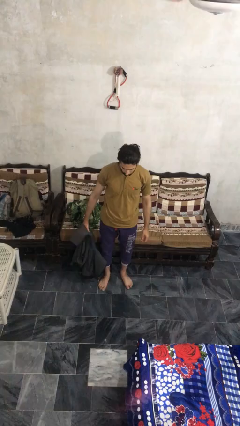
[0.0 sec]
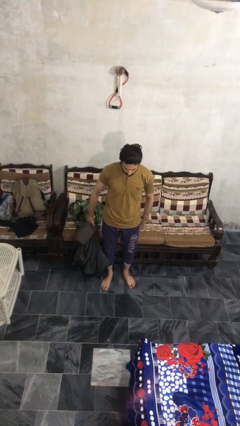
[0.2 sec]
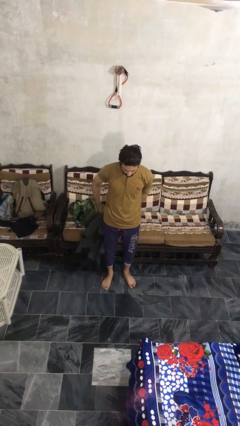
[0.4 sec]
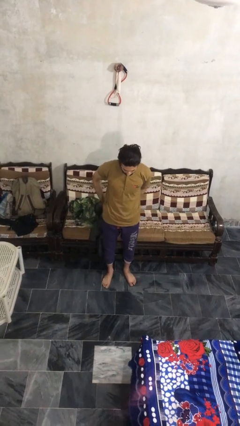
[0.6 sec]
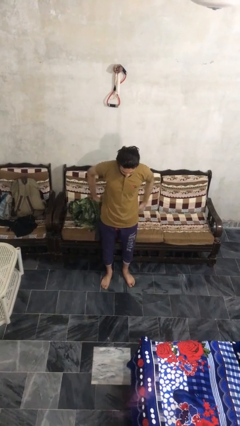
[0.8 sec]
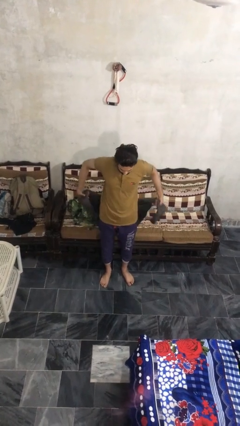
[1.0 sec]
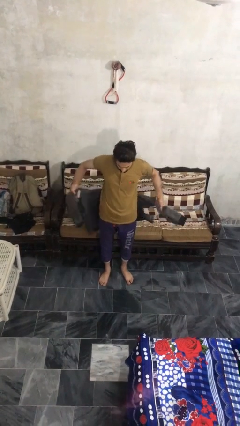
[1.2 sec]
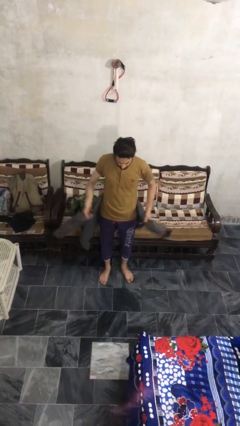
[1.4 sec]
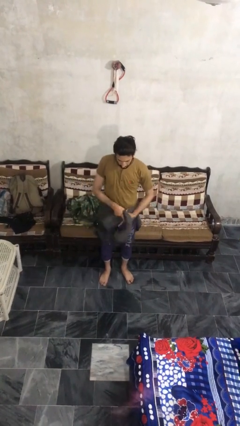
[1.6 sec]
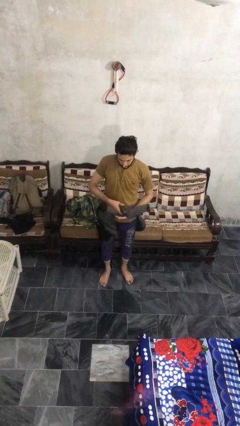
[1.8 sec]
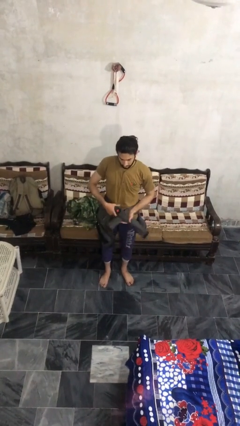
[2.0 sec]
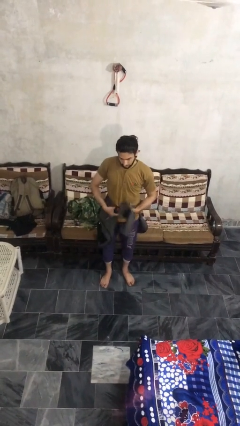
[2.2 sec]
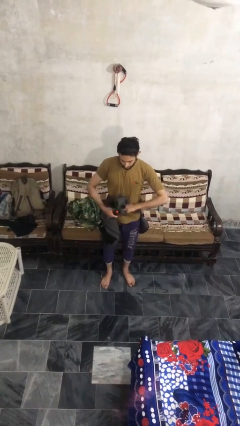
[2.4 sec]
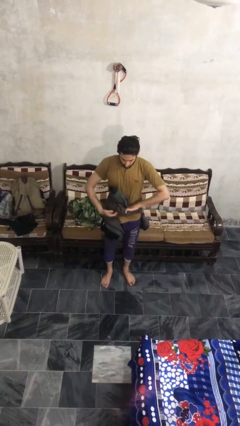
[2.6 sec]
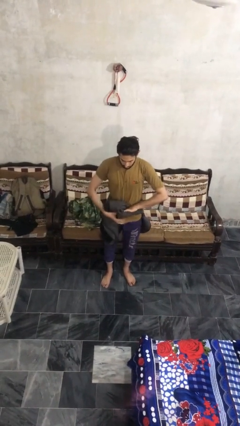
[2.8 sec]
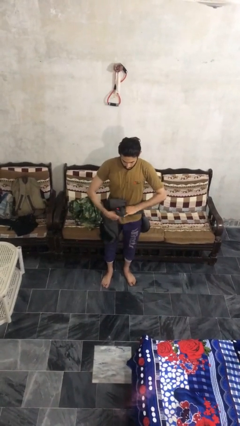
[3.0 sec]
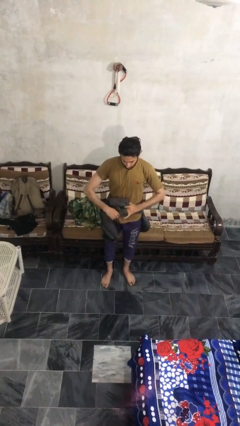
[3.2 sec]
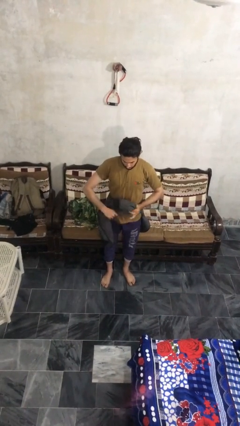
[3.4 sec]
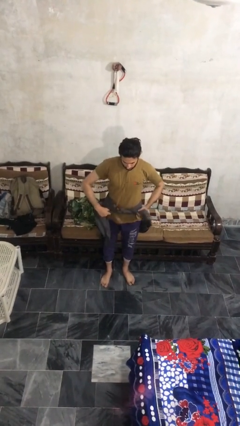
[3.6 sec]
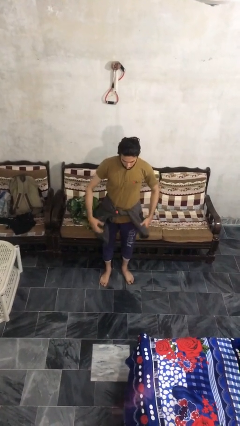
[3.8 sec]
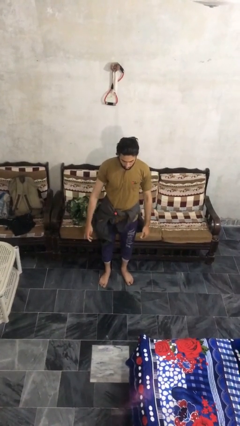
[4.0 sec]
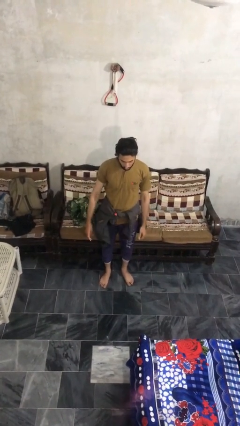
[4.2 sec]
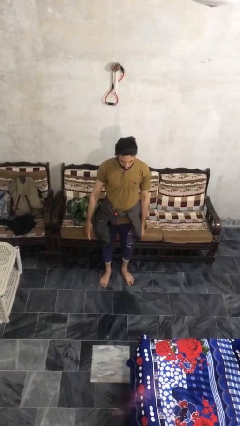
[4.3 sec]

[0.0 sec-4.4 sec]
person ties jacket around waist

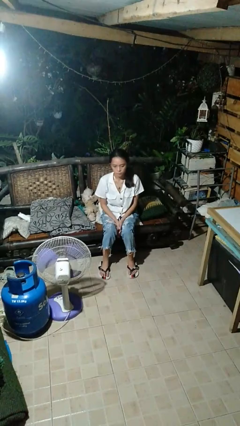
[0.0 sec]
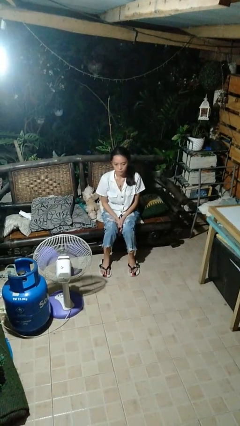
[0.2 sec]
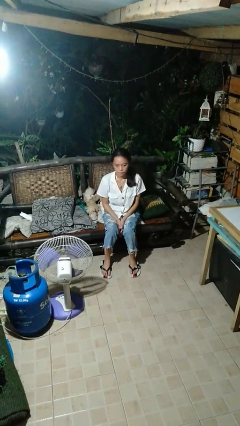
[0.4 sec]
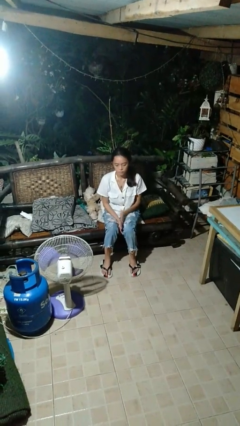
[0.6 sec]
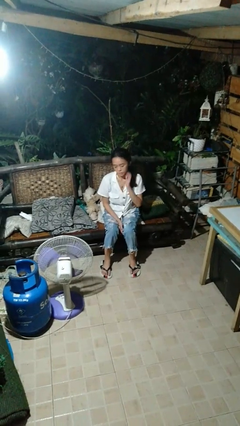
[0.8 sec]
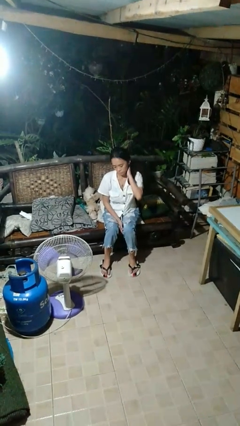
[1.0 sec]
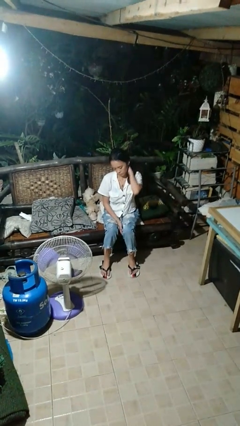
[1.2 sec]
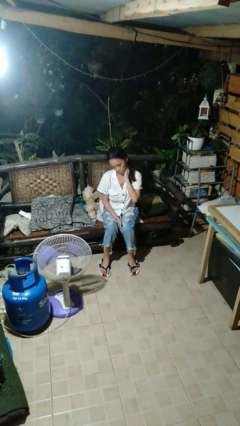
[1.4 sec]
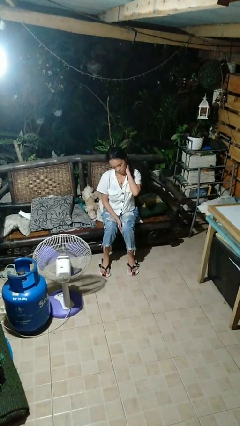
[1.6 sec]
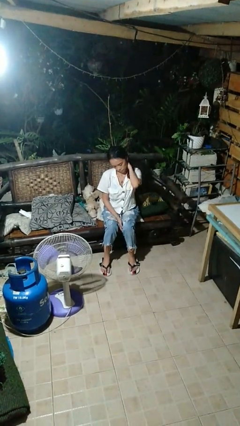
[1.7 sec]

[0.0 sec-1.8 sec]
person rubs neck

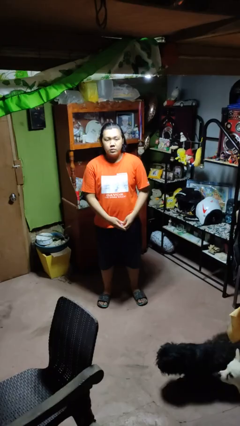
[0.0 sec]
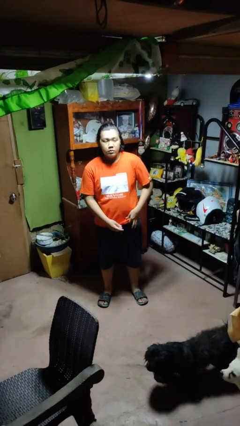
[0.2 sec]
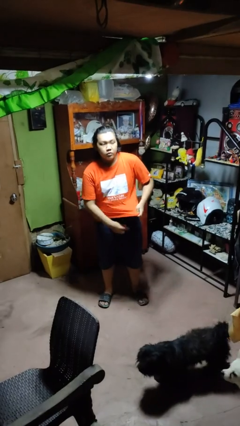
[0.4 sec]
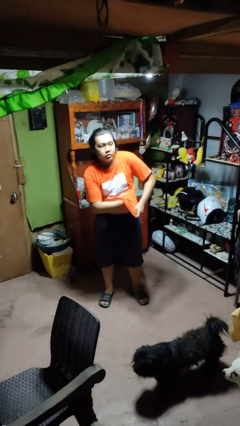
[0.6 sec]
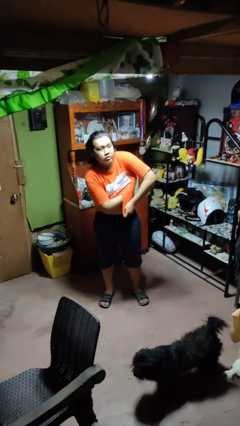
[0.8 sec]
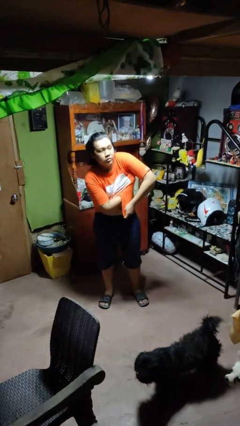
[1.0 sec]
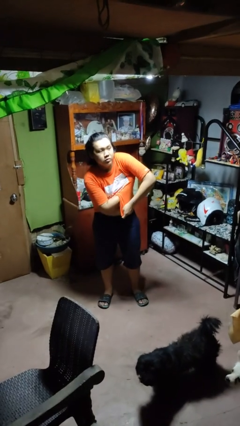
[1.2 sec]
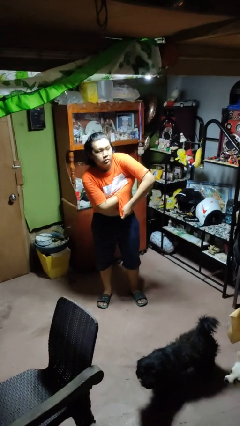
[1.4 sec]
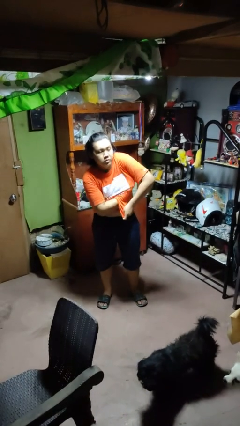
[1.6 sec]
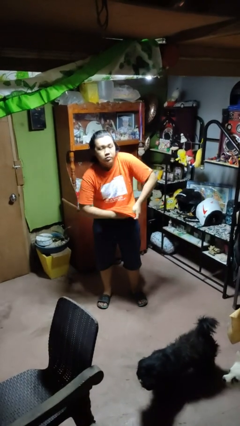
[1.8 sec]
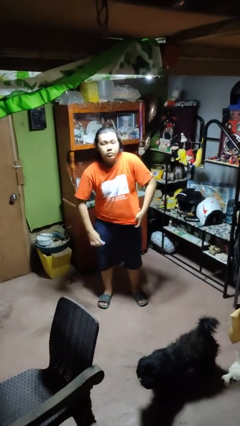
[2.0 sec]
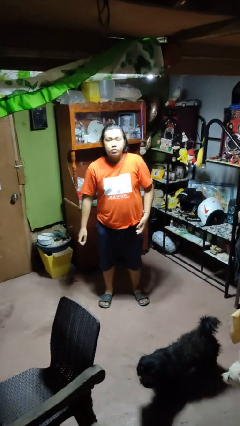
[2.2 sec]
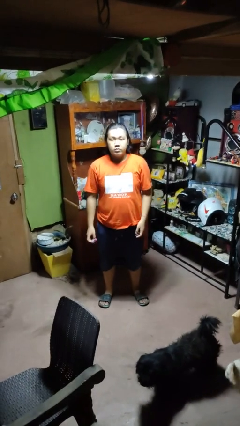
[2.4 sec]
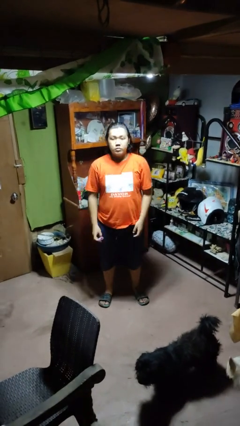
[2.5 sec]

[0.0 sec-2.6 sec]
person applies deodorant

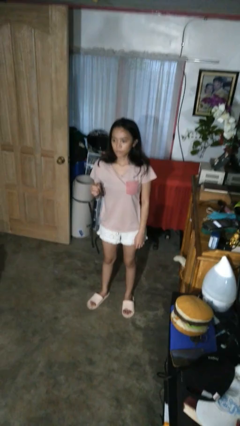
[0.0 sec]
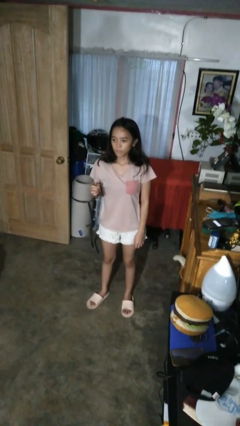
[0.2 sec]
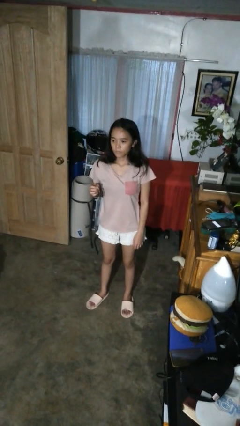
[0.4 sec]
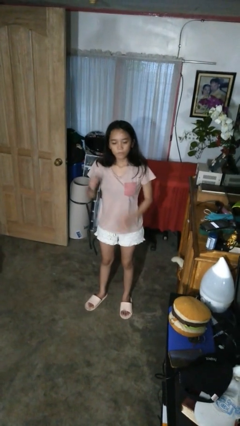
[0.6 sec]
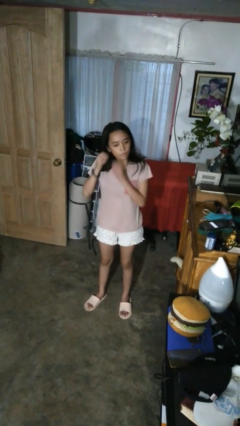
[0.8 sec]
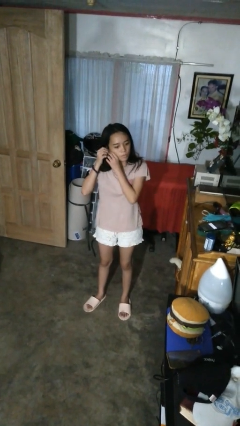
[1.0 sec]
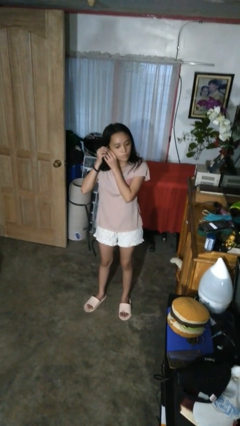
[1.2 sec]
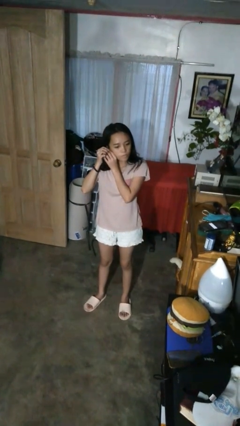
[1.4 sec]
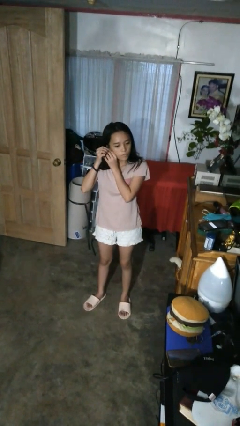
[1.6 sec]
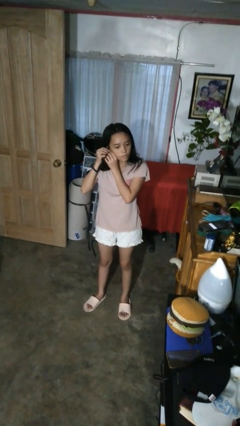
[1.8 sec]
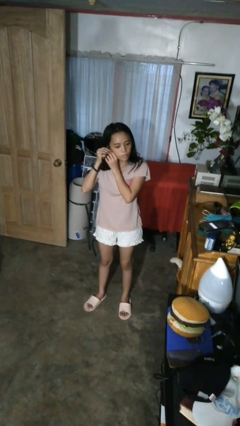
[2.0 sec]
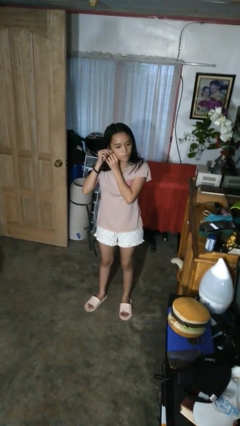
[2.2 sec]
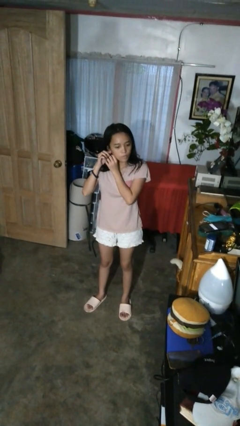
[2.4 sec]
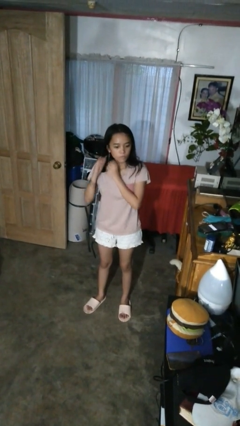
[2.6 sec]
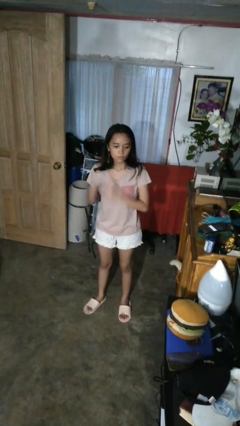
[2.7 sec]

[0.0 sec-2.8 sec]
person puts on earrings

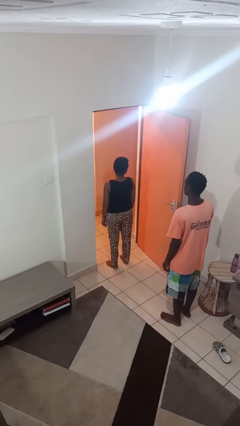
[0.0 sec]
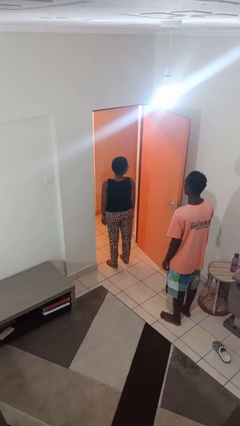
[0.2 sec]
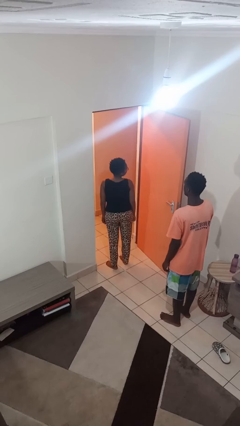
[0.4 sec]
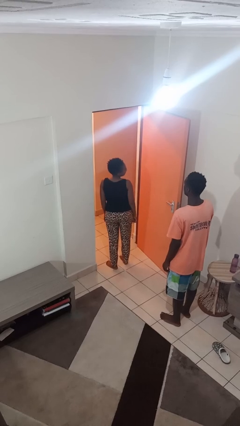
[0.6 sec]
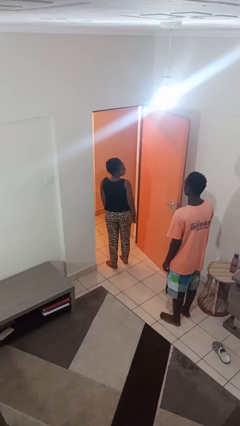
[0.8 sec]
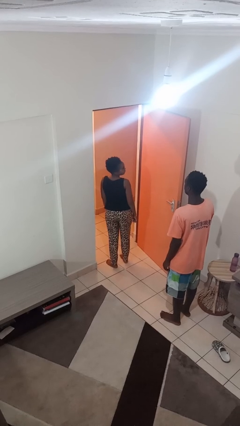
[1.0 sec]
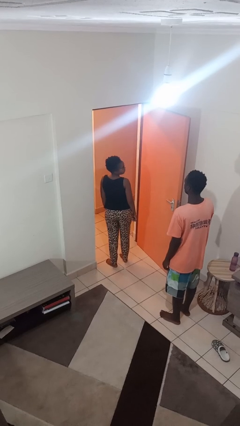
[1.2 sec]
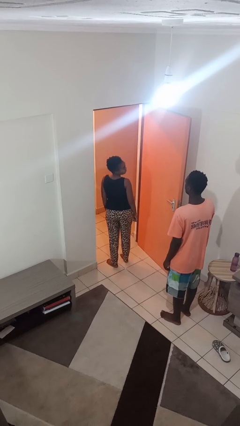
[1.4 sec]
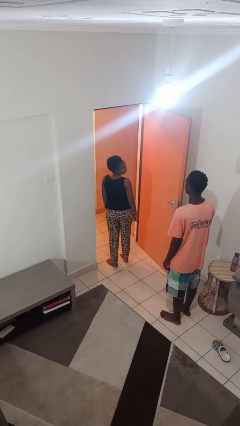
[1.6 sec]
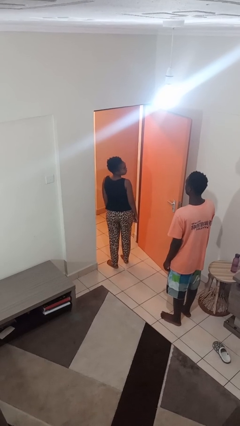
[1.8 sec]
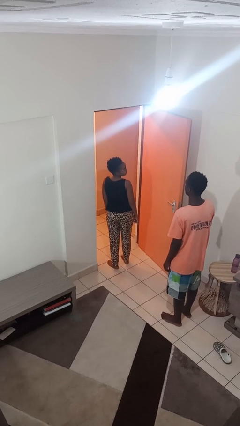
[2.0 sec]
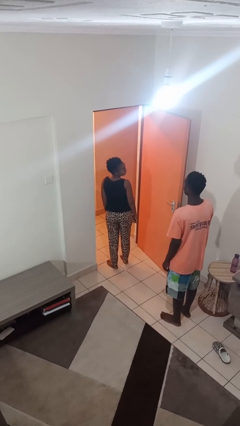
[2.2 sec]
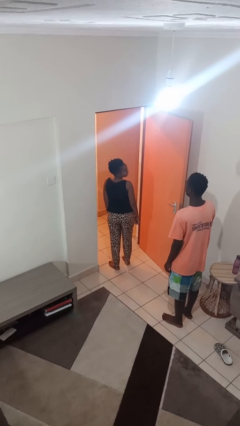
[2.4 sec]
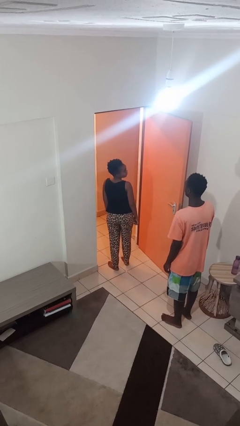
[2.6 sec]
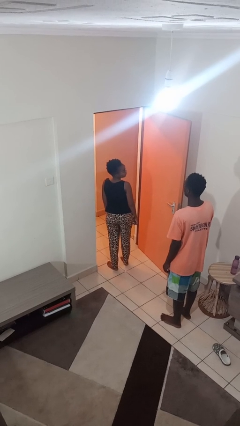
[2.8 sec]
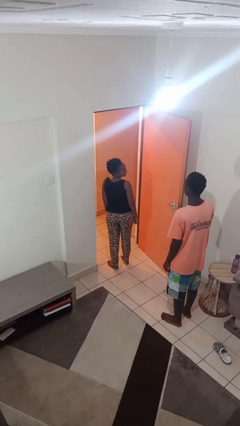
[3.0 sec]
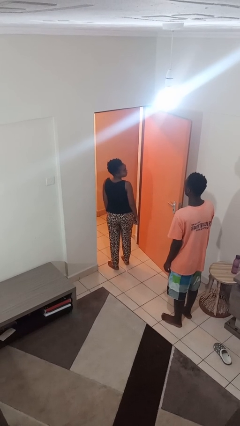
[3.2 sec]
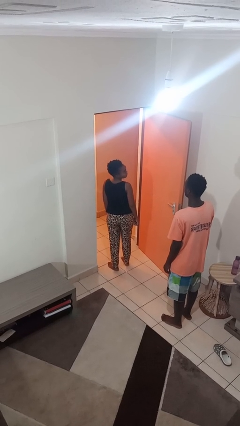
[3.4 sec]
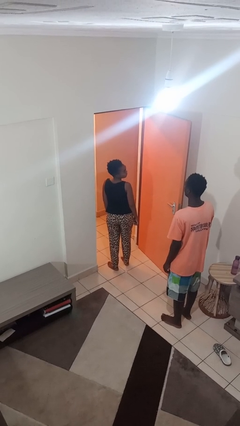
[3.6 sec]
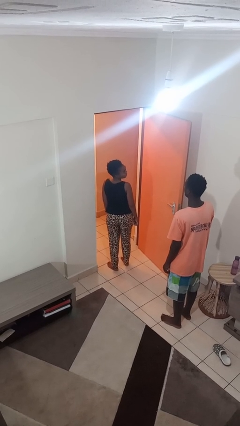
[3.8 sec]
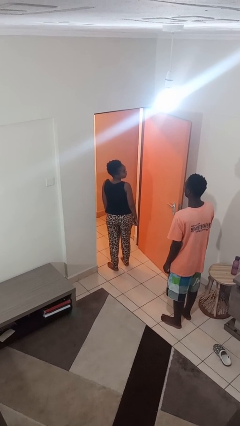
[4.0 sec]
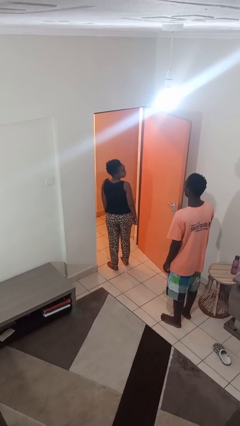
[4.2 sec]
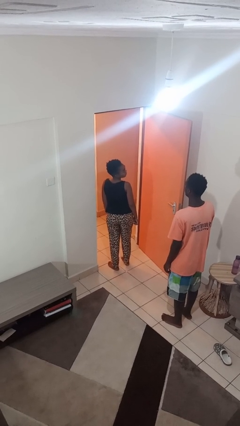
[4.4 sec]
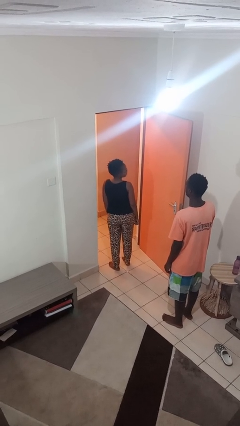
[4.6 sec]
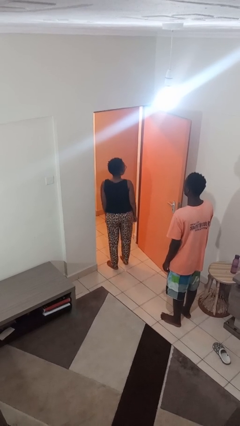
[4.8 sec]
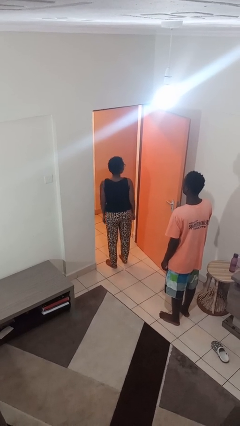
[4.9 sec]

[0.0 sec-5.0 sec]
person looks over shoulder

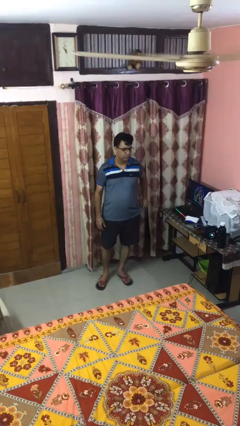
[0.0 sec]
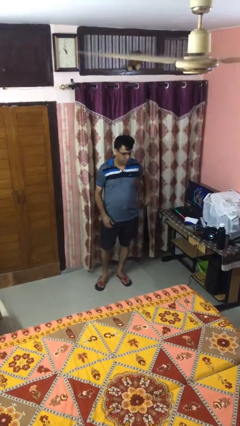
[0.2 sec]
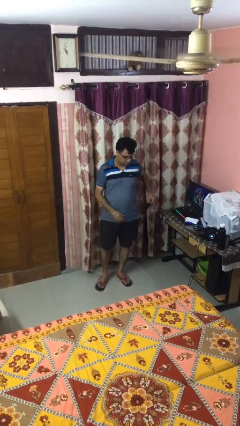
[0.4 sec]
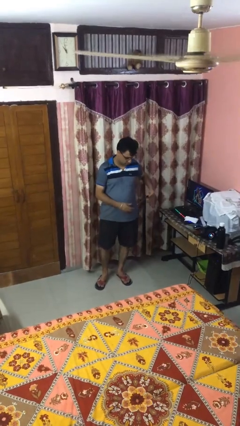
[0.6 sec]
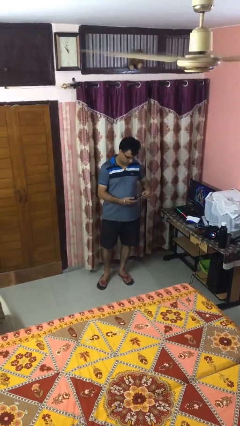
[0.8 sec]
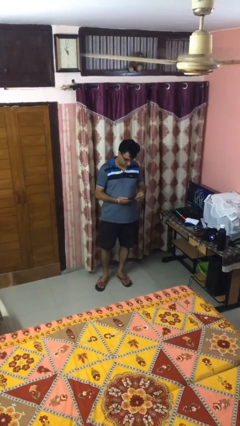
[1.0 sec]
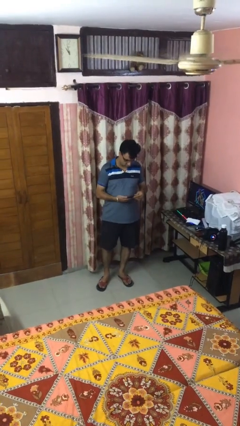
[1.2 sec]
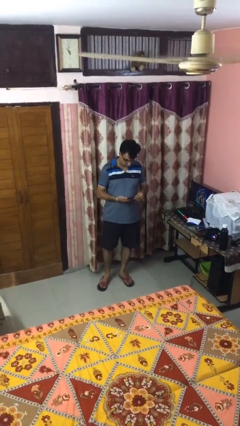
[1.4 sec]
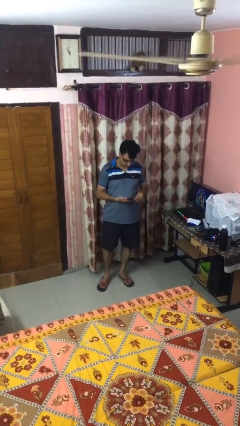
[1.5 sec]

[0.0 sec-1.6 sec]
person takes phone from pocket
